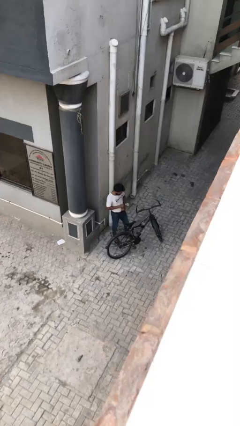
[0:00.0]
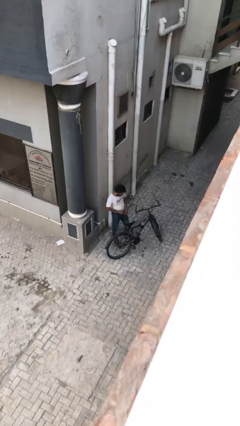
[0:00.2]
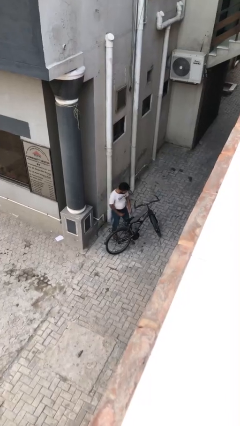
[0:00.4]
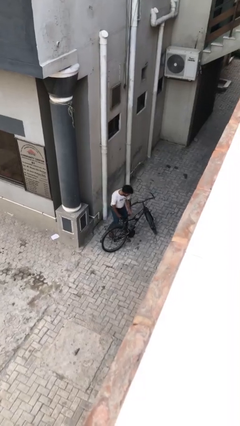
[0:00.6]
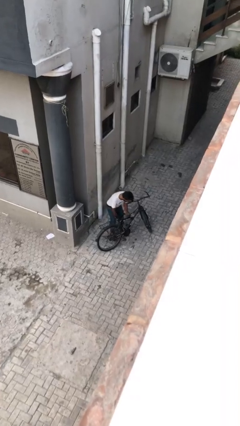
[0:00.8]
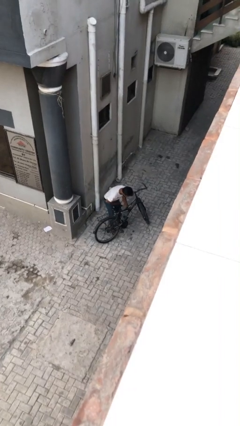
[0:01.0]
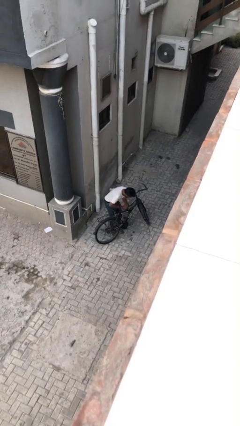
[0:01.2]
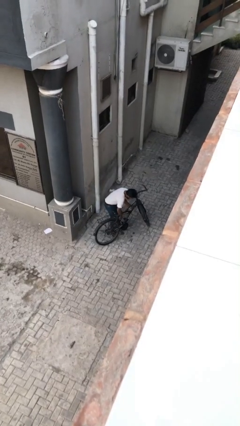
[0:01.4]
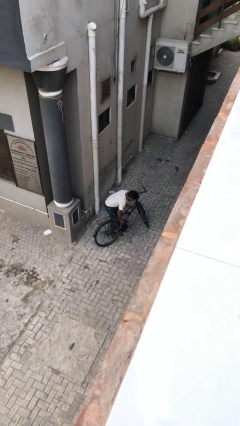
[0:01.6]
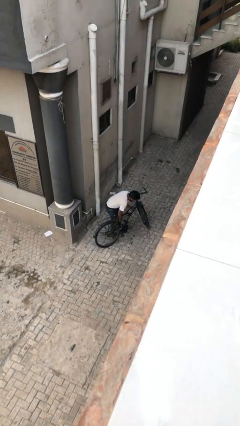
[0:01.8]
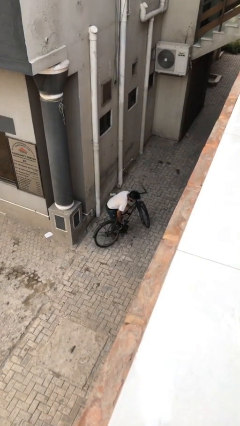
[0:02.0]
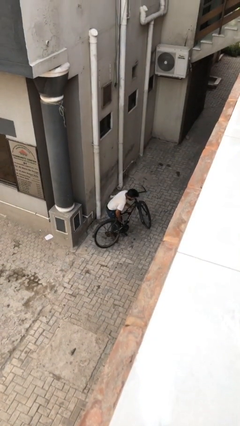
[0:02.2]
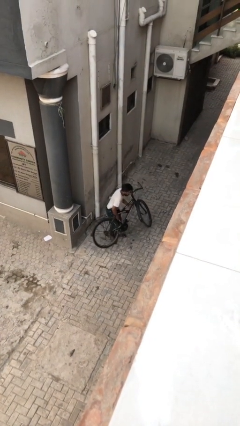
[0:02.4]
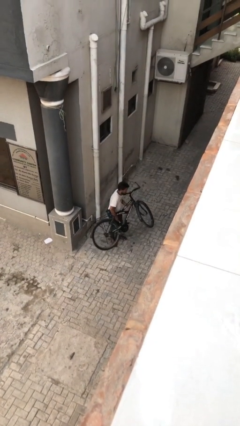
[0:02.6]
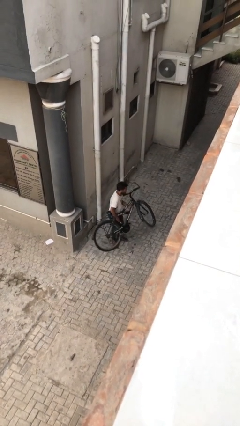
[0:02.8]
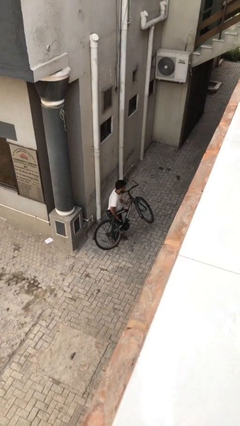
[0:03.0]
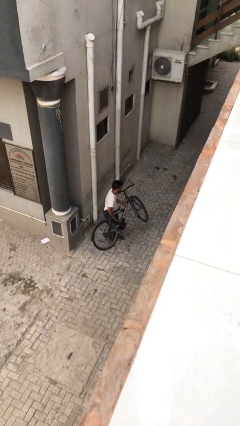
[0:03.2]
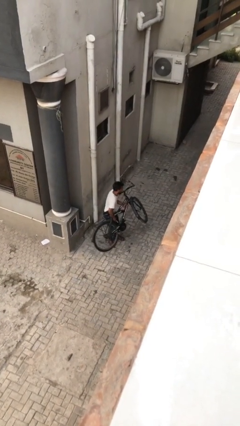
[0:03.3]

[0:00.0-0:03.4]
person picks up object from floor

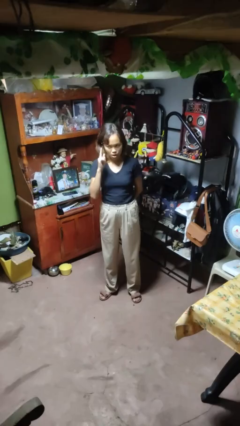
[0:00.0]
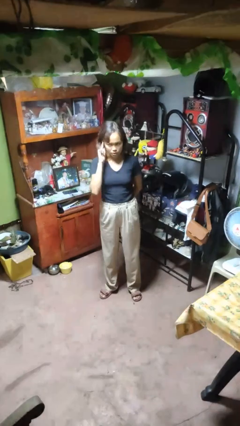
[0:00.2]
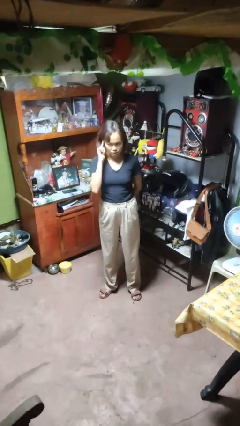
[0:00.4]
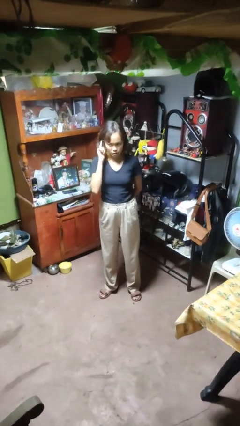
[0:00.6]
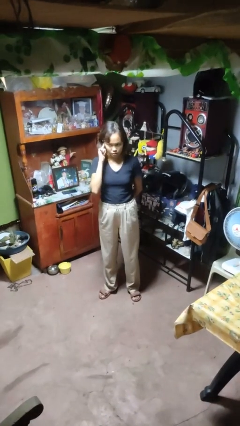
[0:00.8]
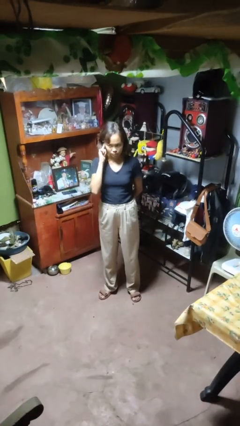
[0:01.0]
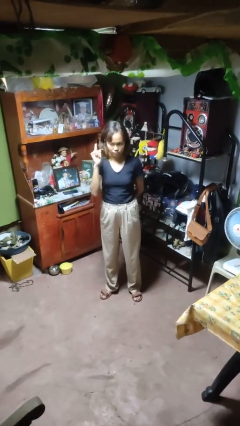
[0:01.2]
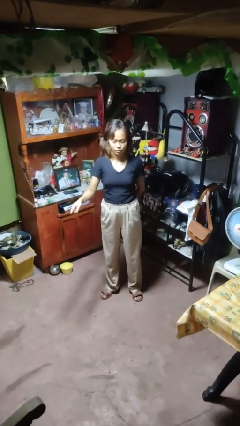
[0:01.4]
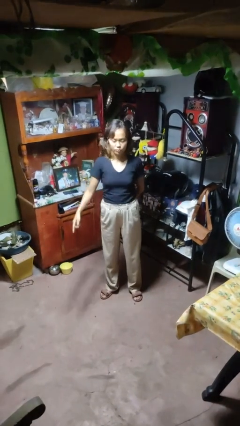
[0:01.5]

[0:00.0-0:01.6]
person gestures listen closely

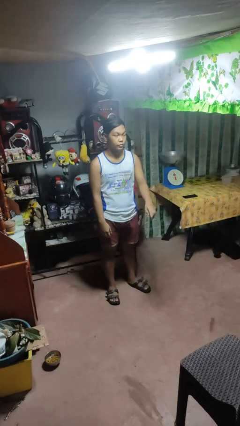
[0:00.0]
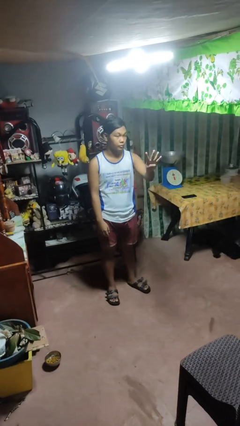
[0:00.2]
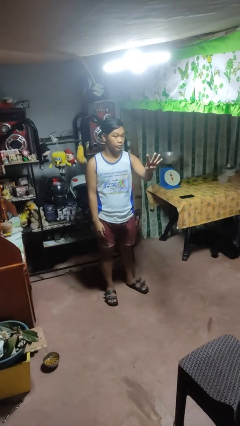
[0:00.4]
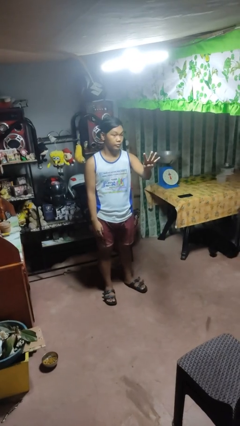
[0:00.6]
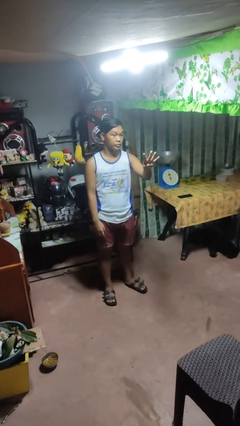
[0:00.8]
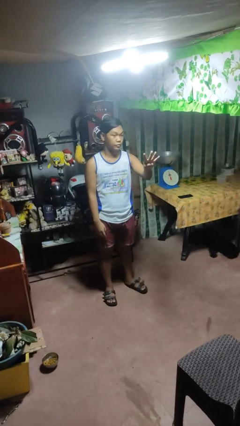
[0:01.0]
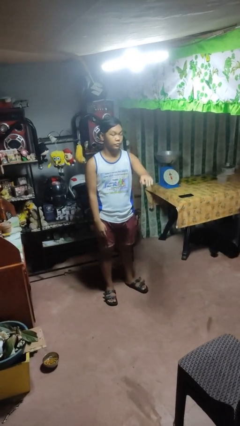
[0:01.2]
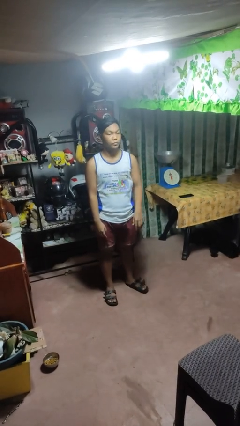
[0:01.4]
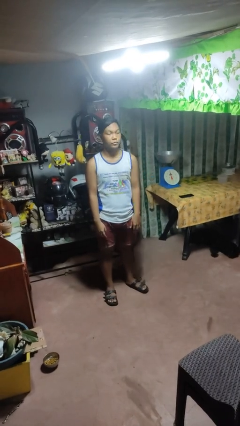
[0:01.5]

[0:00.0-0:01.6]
person gestures number four

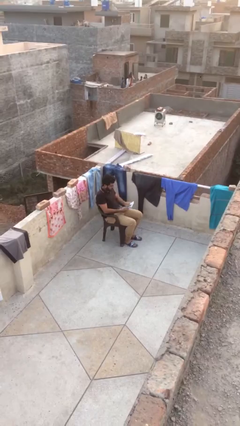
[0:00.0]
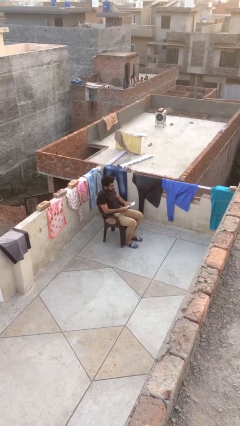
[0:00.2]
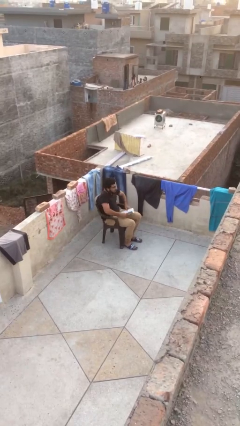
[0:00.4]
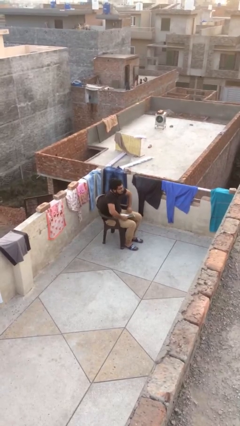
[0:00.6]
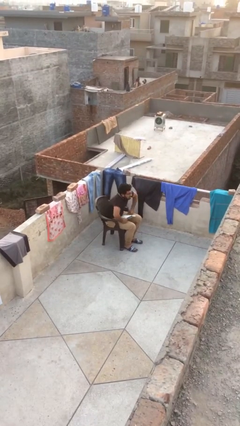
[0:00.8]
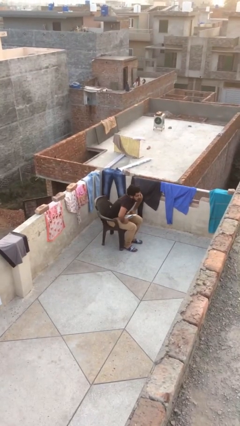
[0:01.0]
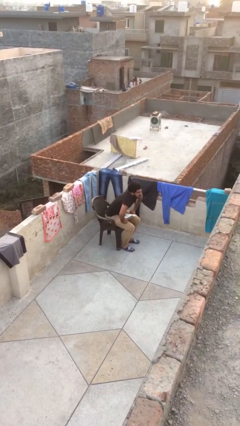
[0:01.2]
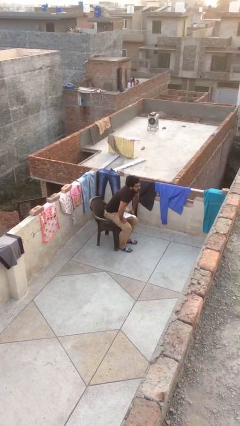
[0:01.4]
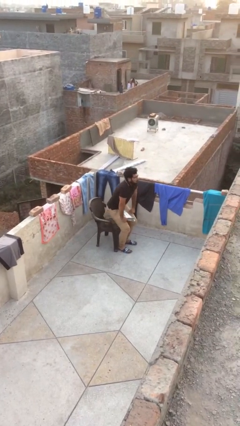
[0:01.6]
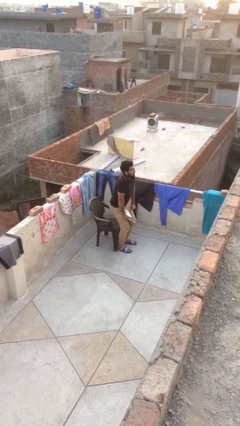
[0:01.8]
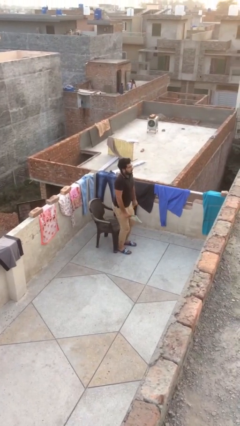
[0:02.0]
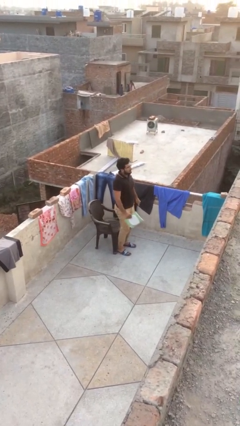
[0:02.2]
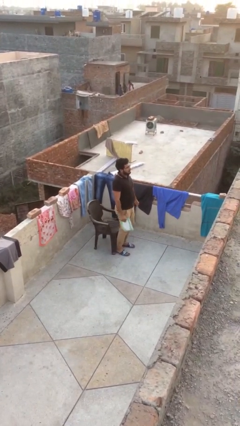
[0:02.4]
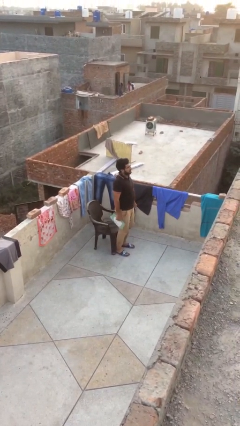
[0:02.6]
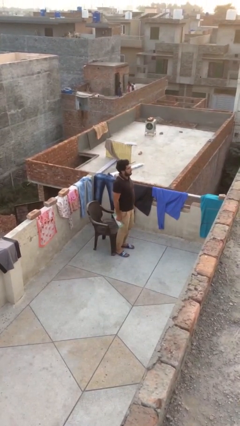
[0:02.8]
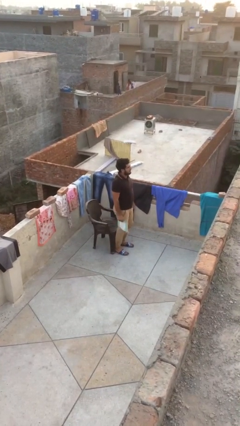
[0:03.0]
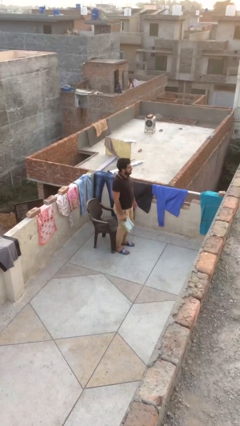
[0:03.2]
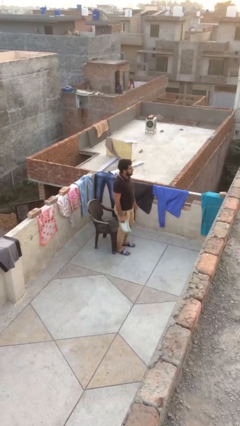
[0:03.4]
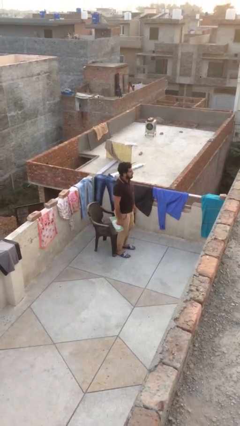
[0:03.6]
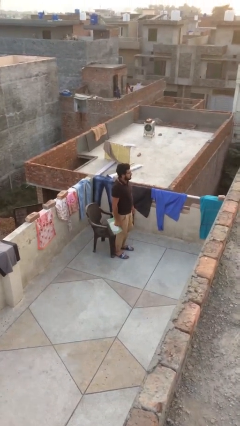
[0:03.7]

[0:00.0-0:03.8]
person stands up

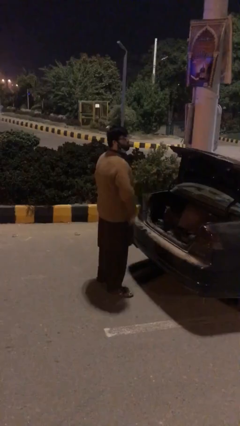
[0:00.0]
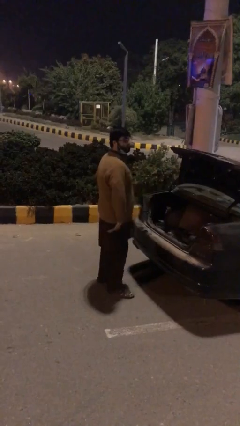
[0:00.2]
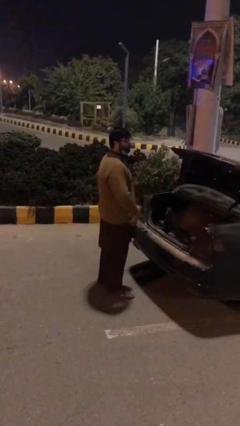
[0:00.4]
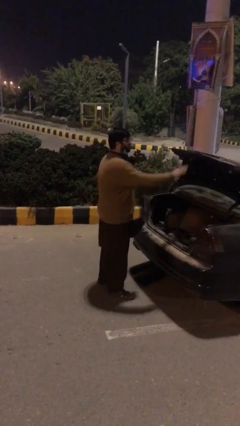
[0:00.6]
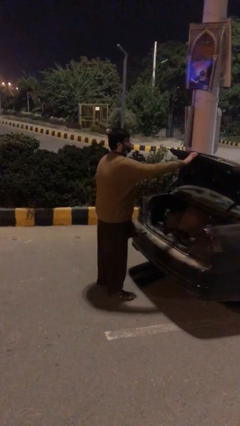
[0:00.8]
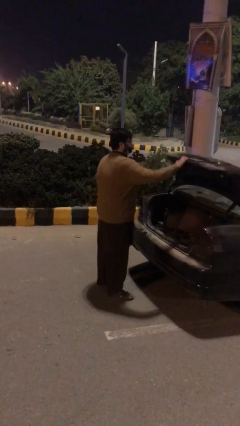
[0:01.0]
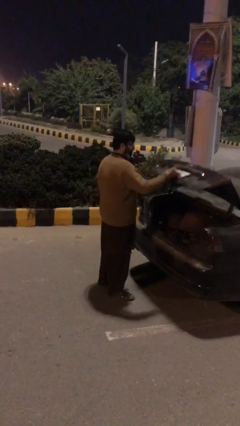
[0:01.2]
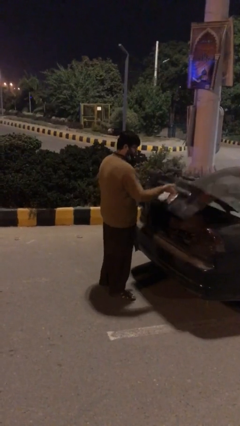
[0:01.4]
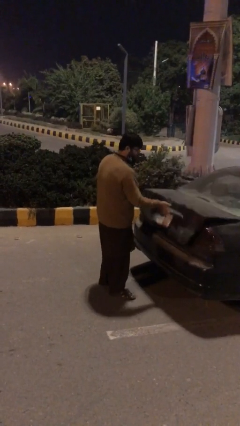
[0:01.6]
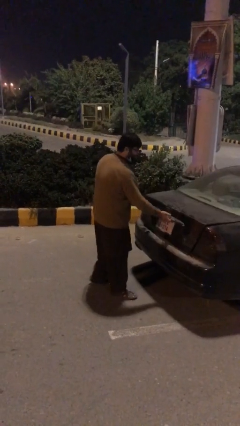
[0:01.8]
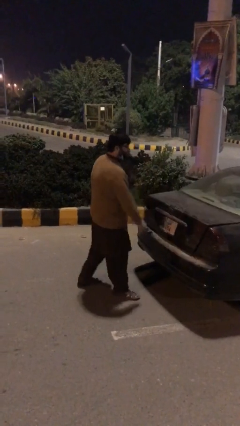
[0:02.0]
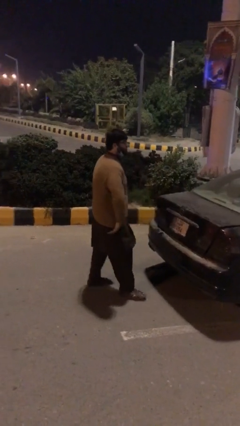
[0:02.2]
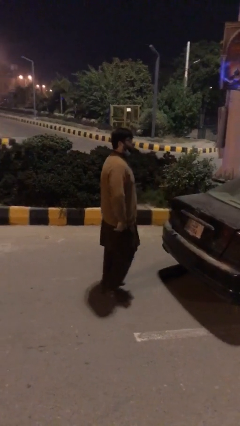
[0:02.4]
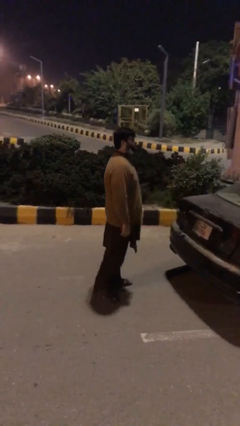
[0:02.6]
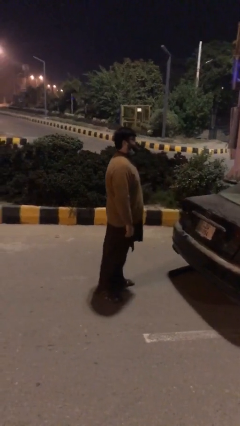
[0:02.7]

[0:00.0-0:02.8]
person closes car trunk

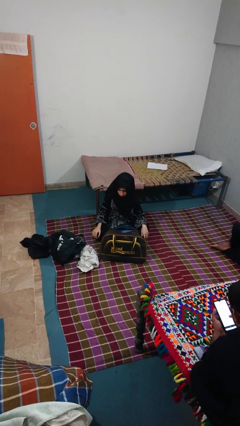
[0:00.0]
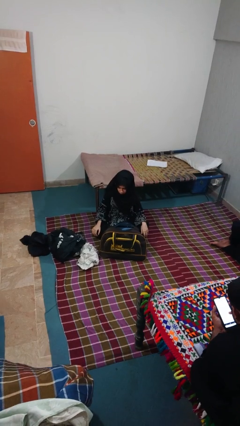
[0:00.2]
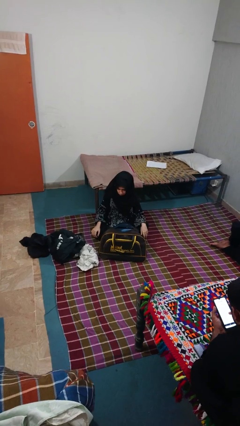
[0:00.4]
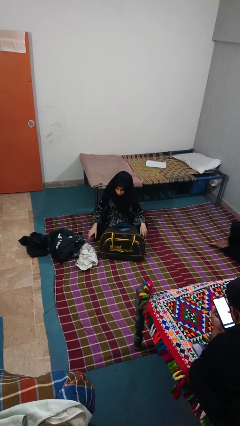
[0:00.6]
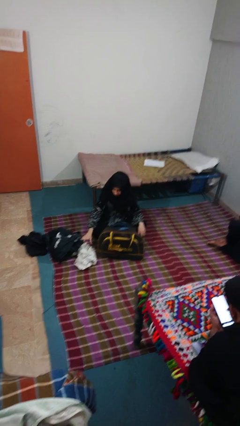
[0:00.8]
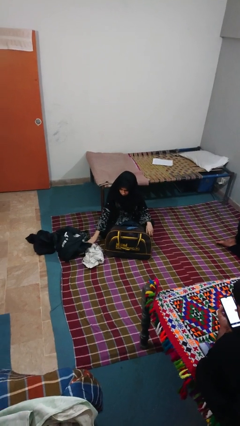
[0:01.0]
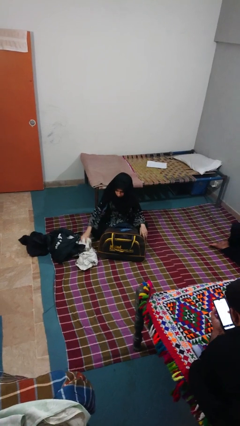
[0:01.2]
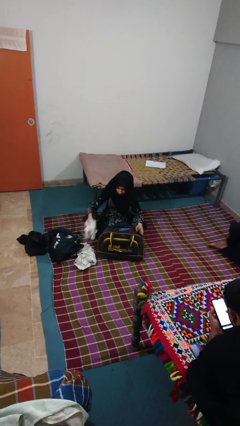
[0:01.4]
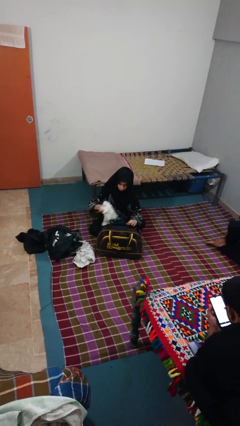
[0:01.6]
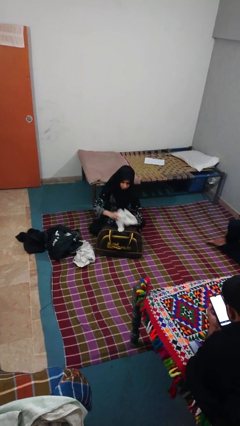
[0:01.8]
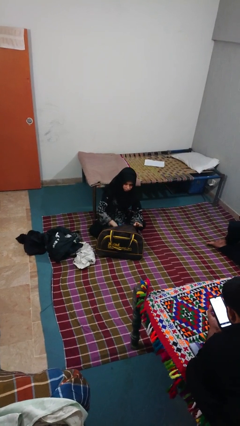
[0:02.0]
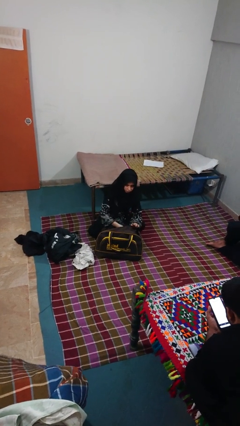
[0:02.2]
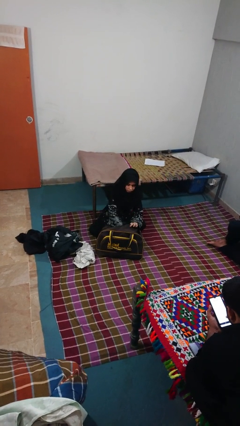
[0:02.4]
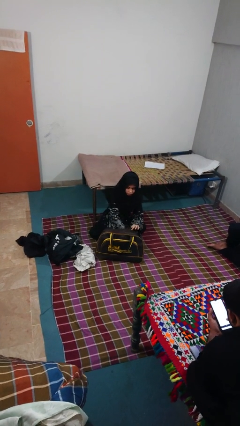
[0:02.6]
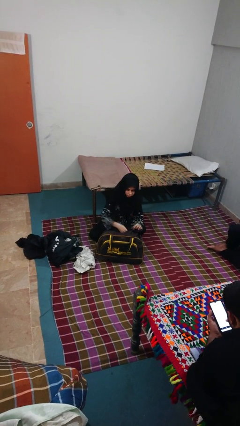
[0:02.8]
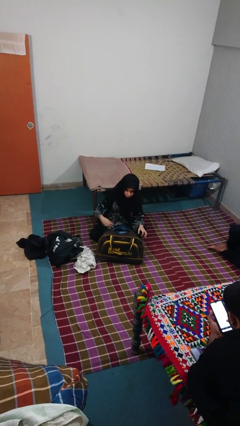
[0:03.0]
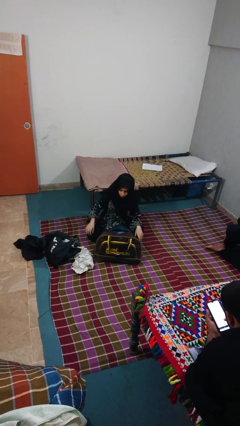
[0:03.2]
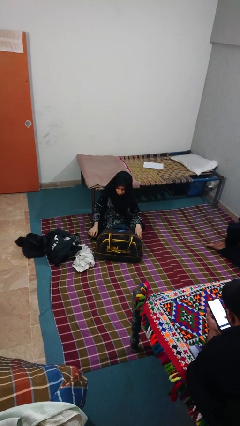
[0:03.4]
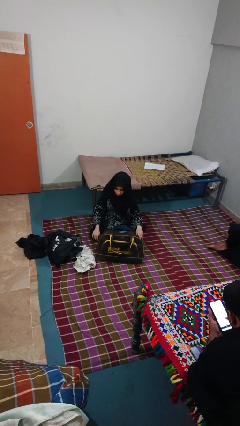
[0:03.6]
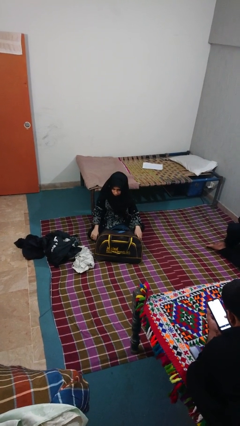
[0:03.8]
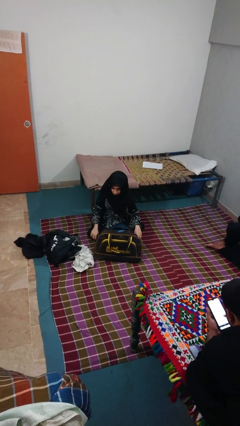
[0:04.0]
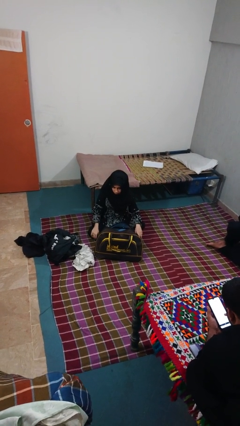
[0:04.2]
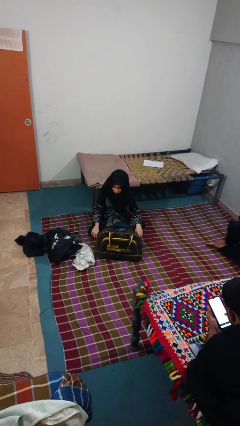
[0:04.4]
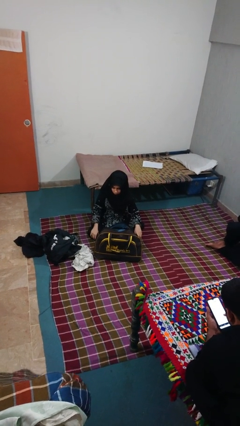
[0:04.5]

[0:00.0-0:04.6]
person loads clothes into suitcase
